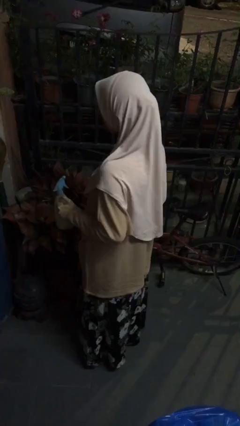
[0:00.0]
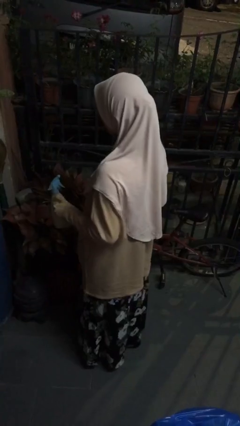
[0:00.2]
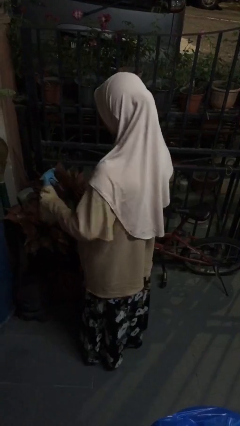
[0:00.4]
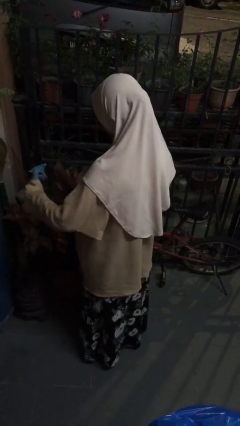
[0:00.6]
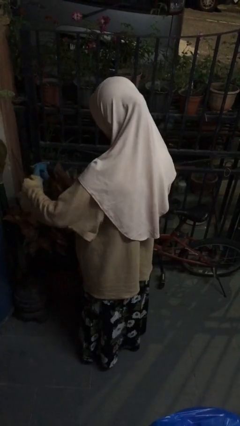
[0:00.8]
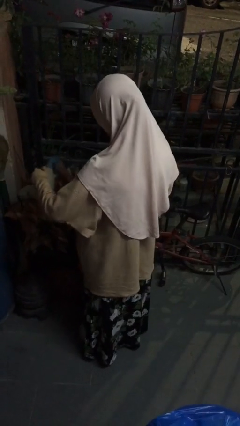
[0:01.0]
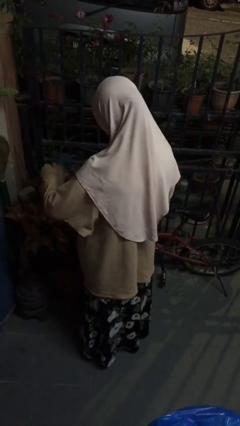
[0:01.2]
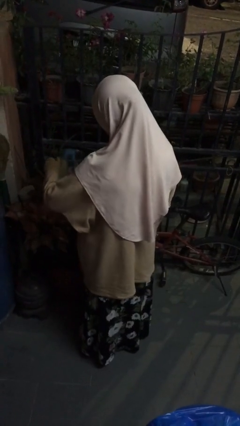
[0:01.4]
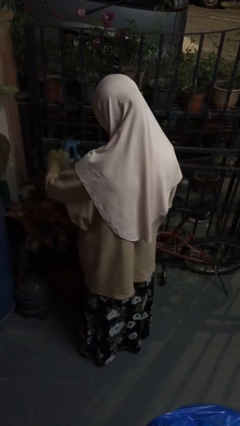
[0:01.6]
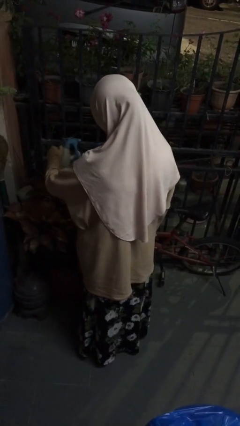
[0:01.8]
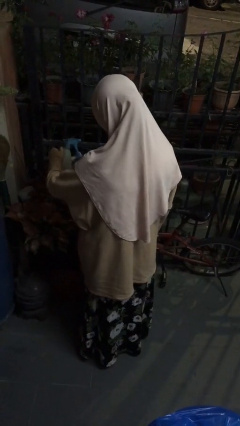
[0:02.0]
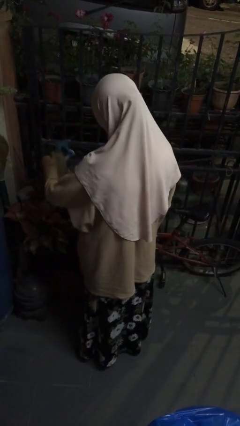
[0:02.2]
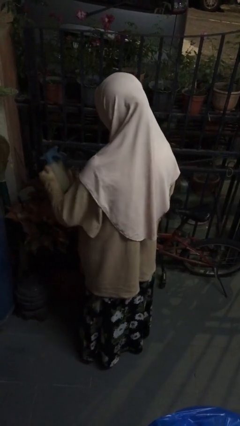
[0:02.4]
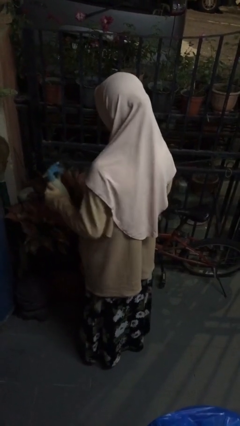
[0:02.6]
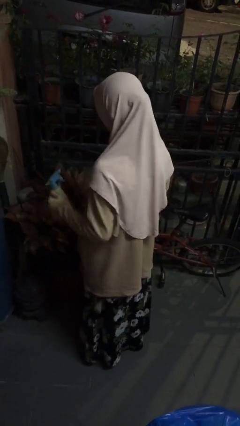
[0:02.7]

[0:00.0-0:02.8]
person waters houseplant

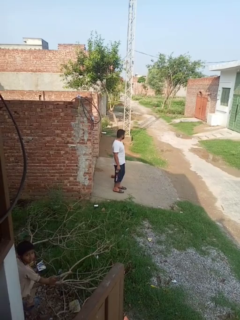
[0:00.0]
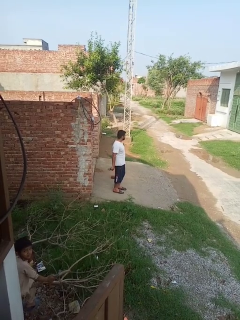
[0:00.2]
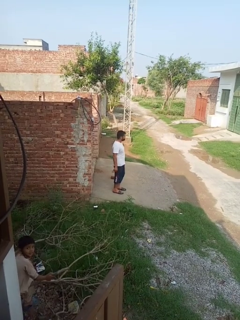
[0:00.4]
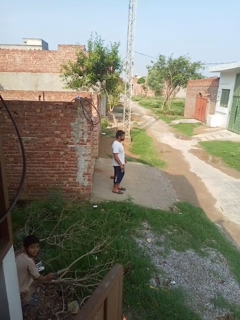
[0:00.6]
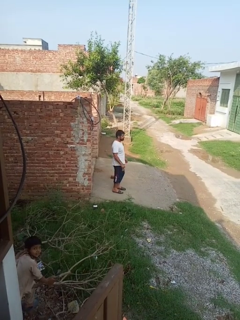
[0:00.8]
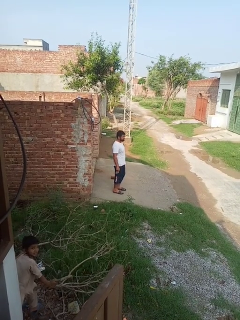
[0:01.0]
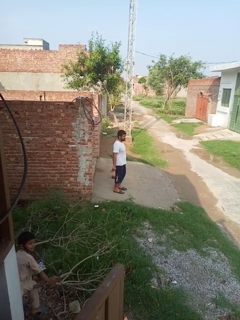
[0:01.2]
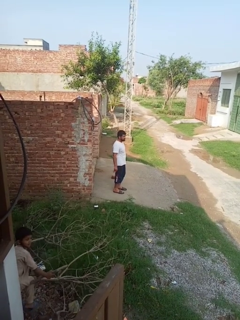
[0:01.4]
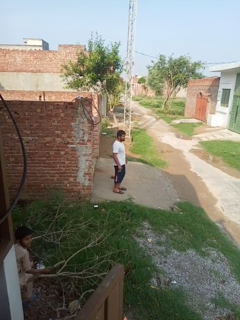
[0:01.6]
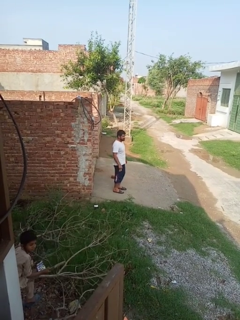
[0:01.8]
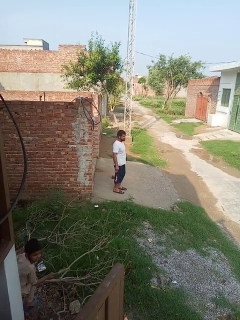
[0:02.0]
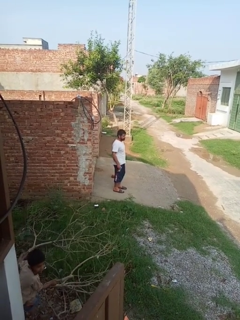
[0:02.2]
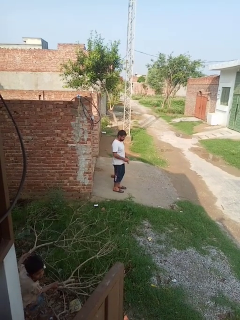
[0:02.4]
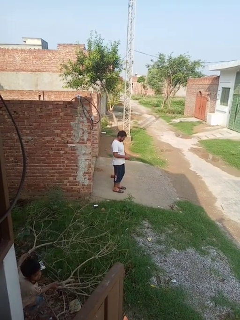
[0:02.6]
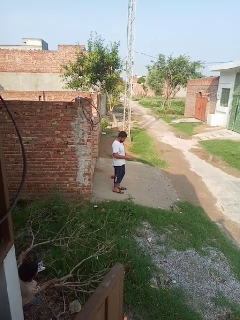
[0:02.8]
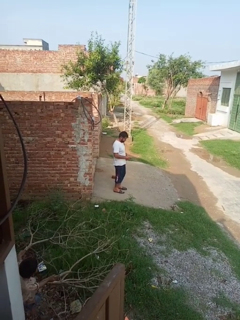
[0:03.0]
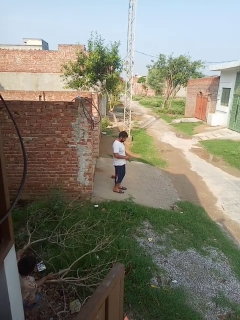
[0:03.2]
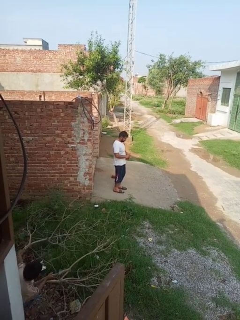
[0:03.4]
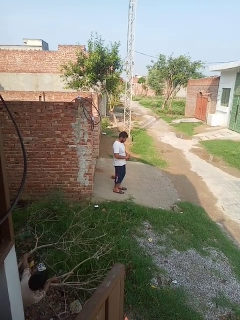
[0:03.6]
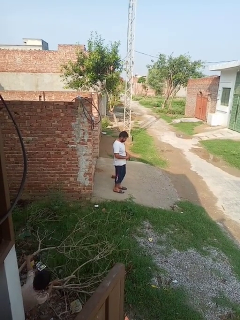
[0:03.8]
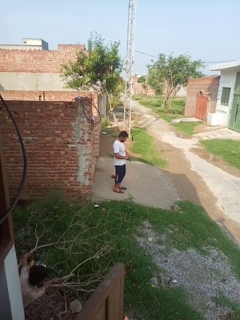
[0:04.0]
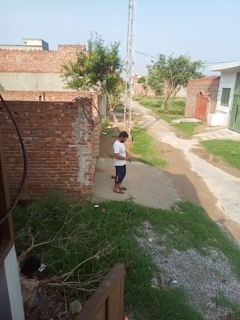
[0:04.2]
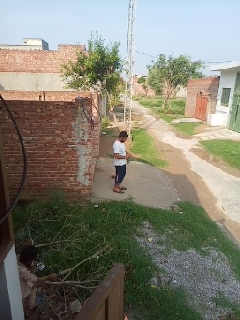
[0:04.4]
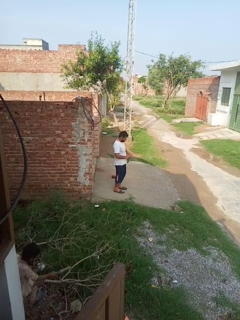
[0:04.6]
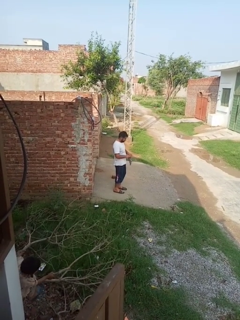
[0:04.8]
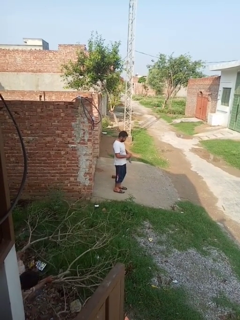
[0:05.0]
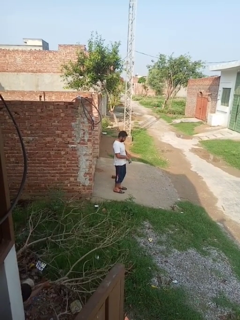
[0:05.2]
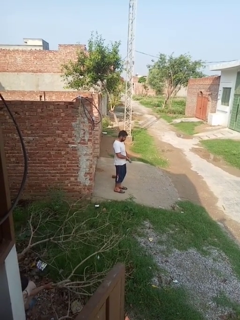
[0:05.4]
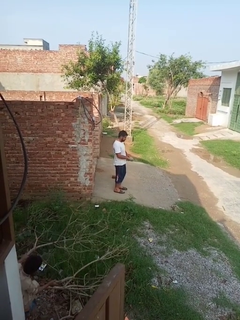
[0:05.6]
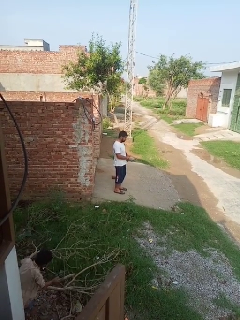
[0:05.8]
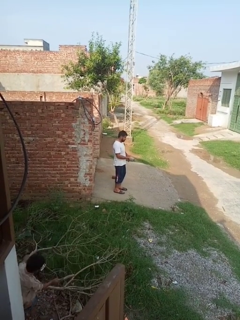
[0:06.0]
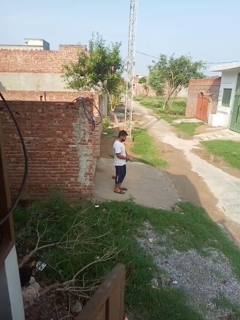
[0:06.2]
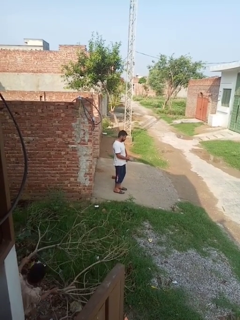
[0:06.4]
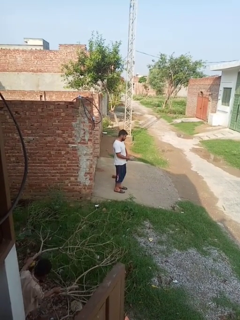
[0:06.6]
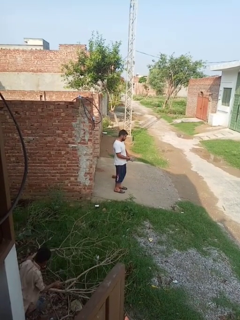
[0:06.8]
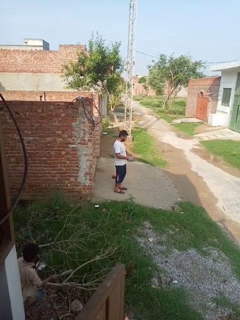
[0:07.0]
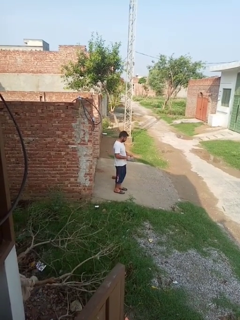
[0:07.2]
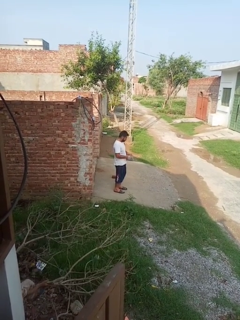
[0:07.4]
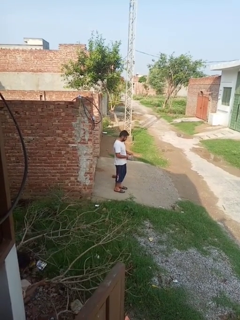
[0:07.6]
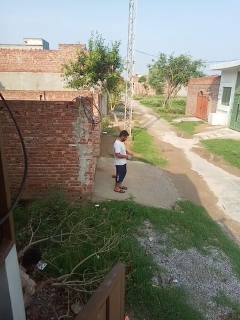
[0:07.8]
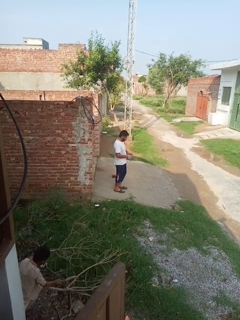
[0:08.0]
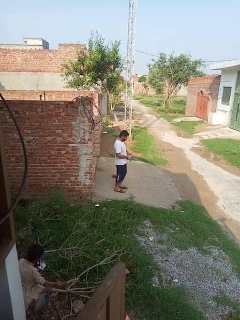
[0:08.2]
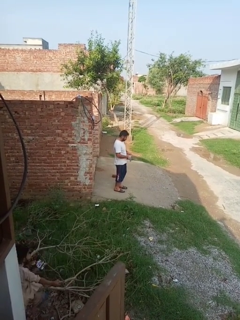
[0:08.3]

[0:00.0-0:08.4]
person puts on gloves

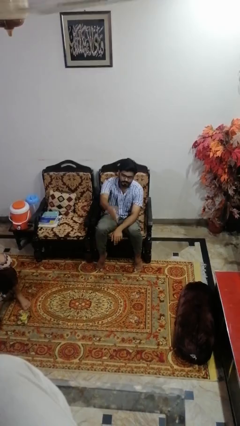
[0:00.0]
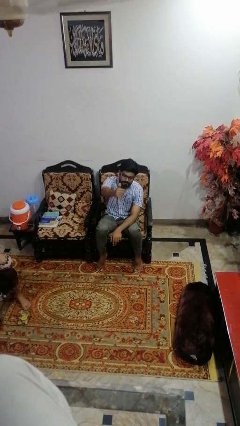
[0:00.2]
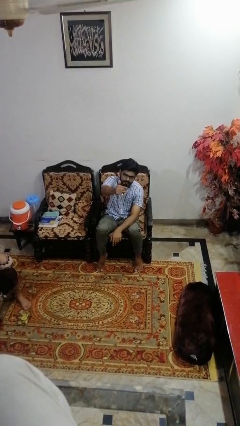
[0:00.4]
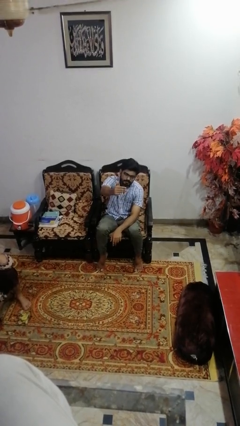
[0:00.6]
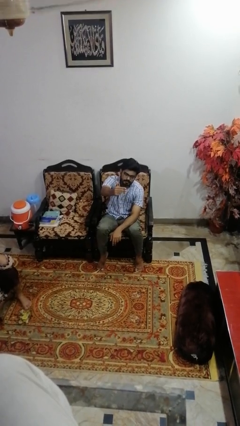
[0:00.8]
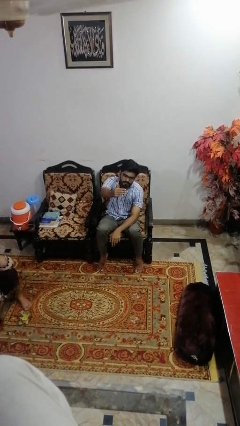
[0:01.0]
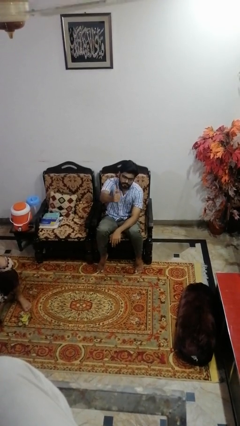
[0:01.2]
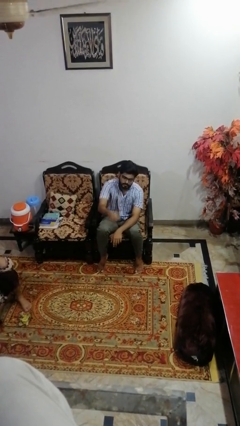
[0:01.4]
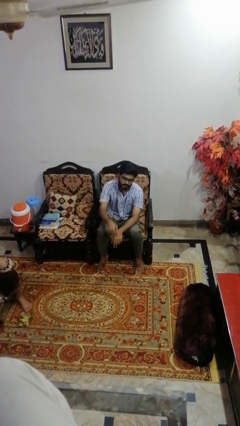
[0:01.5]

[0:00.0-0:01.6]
person gestures come here

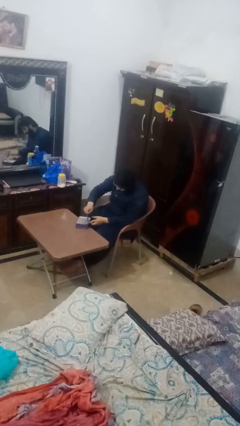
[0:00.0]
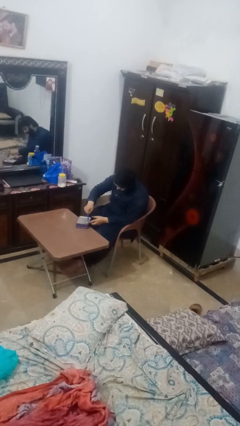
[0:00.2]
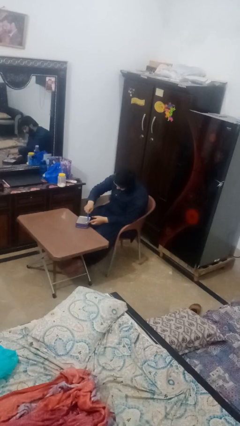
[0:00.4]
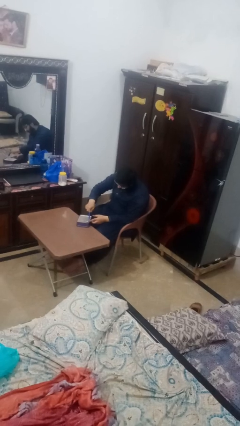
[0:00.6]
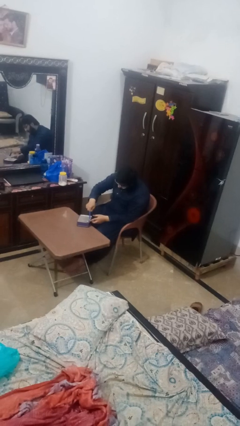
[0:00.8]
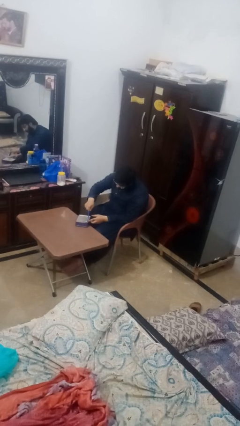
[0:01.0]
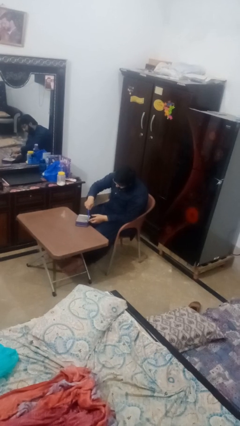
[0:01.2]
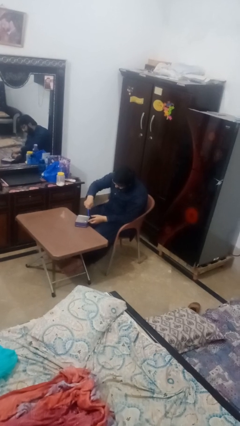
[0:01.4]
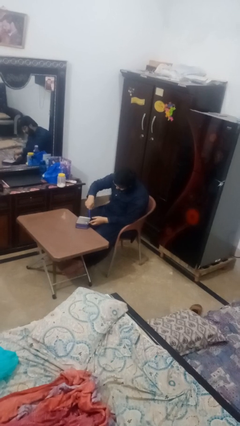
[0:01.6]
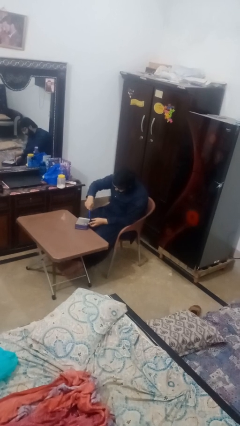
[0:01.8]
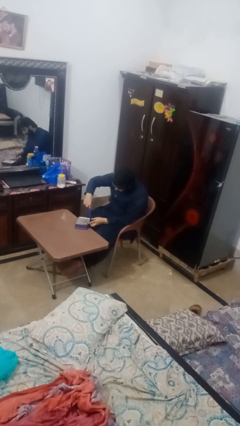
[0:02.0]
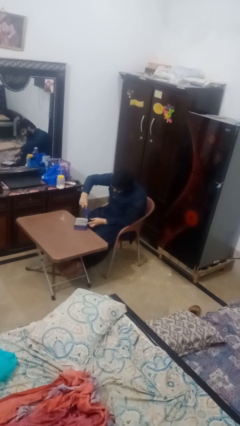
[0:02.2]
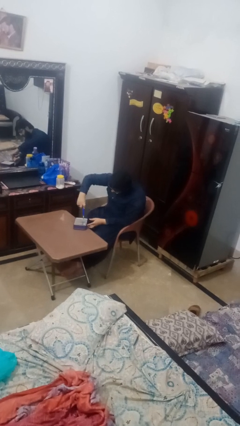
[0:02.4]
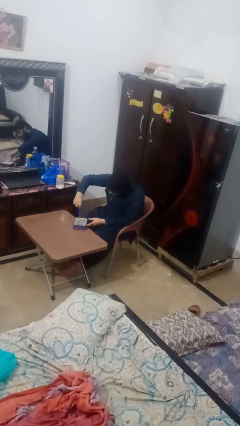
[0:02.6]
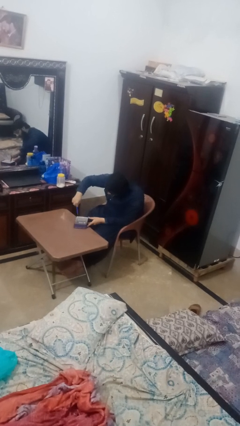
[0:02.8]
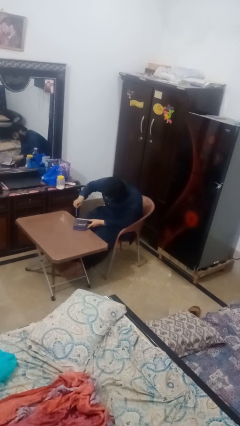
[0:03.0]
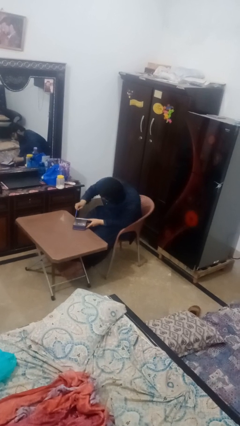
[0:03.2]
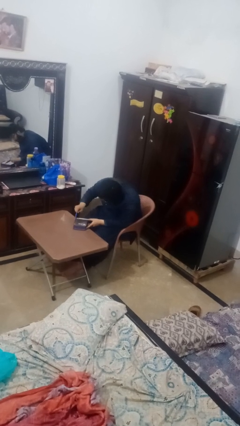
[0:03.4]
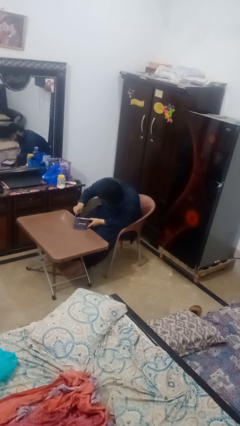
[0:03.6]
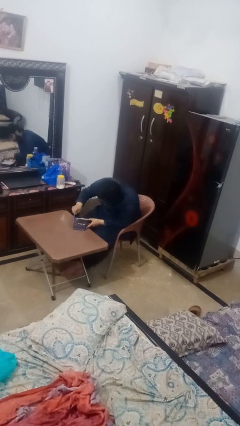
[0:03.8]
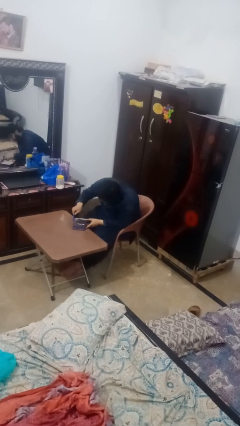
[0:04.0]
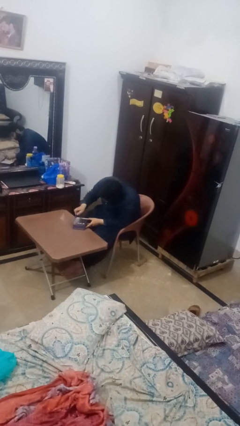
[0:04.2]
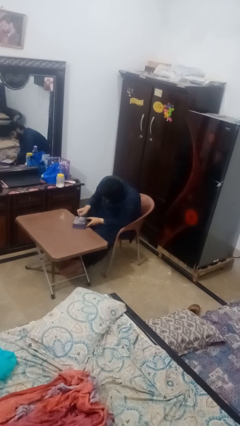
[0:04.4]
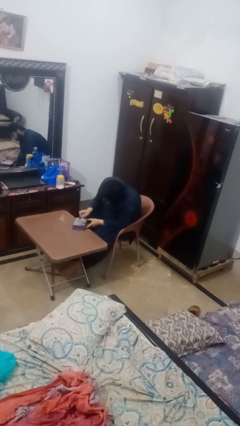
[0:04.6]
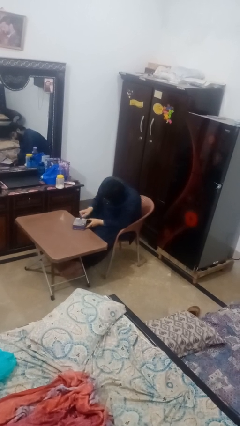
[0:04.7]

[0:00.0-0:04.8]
person opens can with can opener

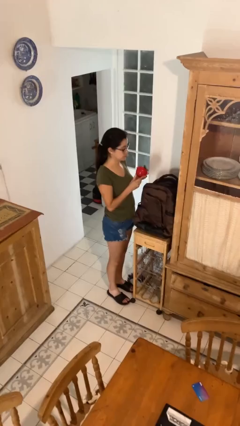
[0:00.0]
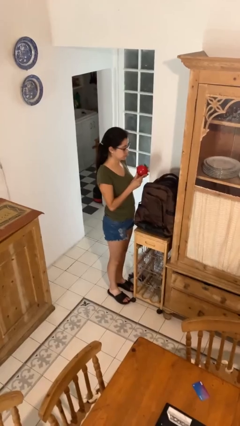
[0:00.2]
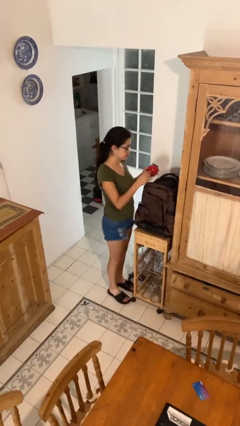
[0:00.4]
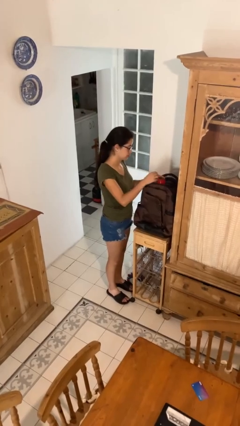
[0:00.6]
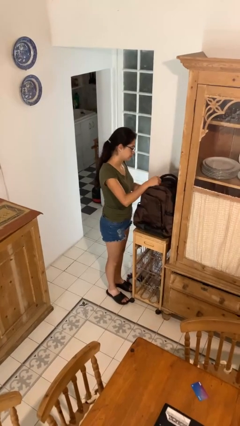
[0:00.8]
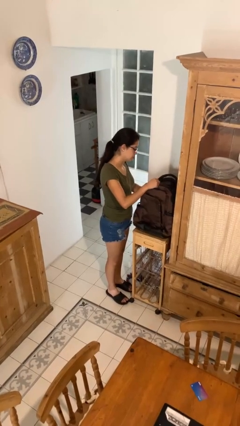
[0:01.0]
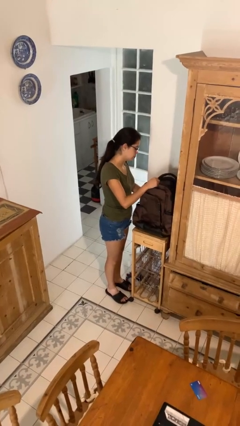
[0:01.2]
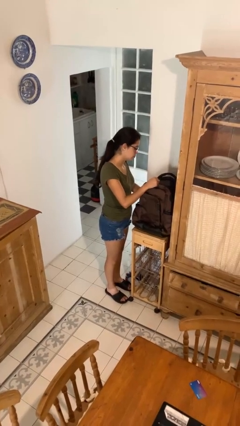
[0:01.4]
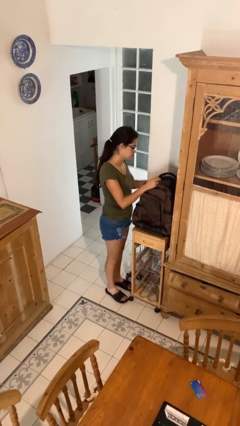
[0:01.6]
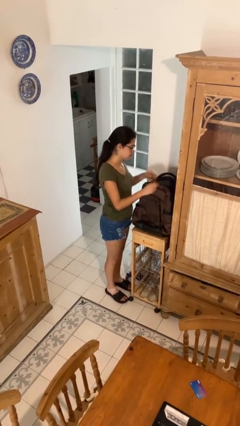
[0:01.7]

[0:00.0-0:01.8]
person puts object into backpack

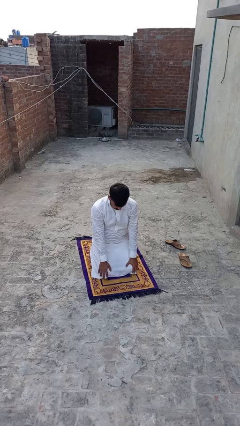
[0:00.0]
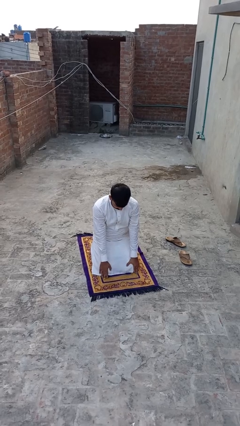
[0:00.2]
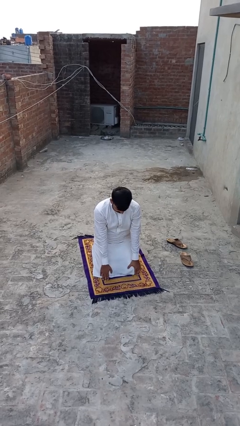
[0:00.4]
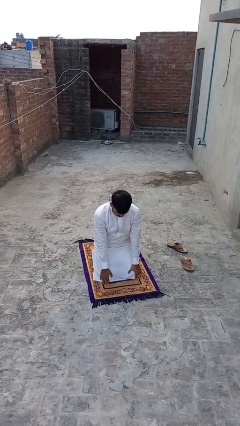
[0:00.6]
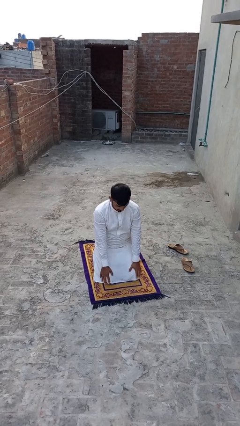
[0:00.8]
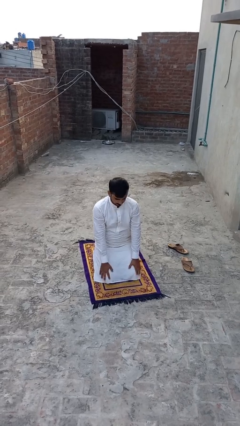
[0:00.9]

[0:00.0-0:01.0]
person stands up from floor
